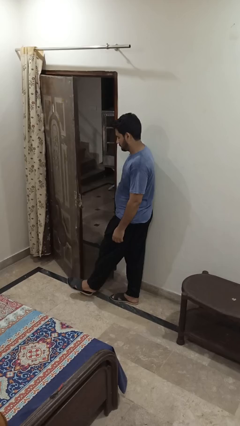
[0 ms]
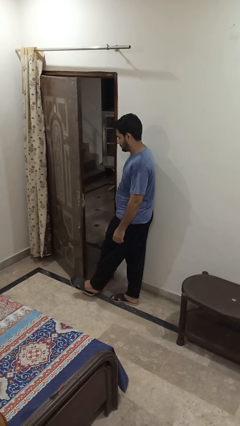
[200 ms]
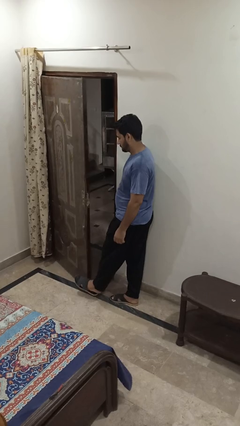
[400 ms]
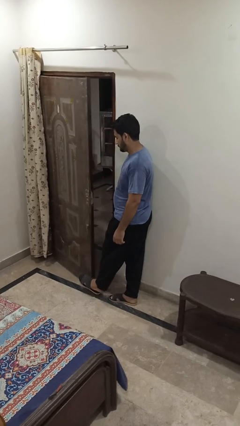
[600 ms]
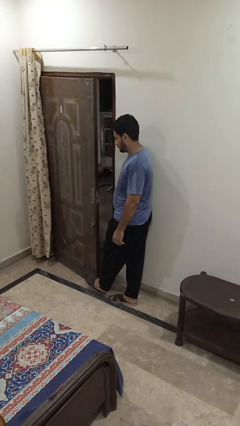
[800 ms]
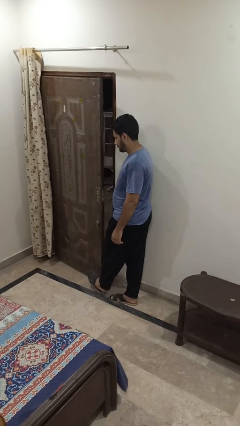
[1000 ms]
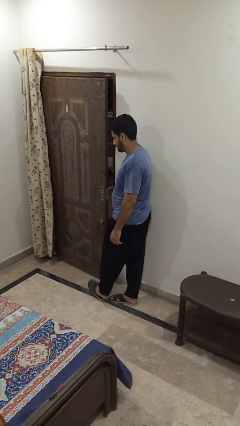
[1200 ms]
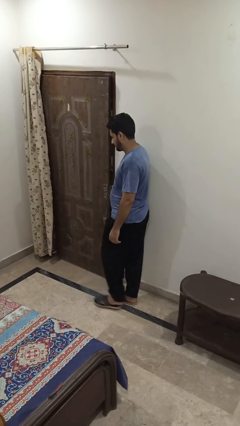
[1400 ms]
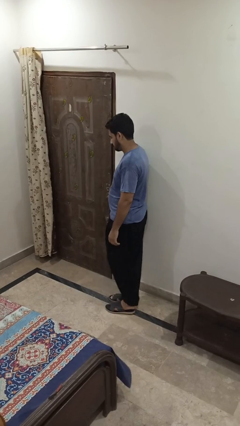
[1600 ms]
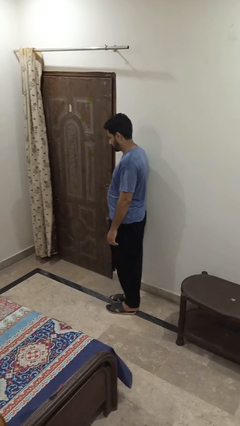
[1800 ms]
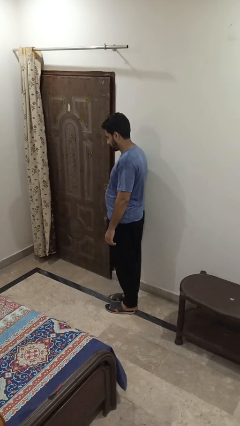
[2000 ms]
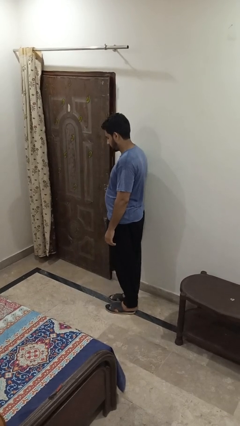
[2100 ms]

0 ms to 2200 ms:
person closes door with foot

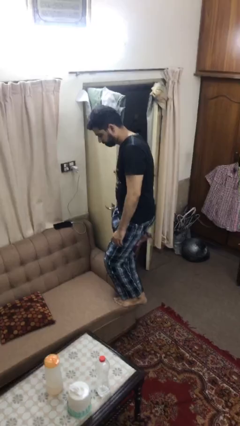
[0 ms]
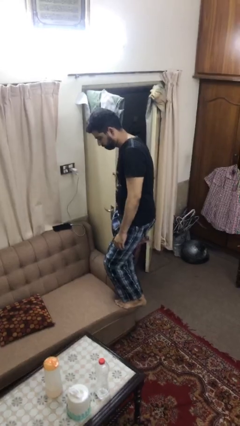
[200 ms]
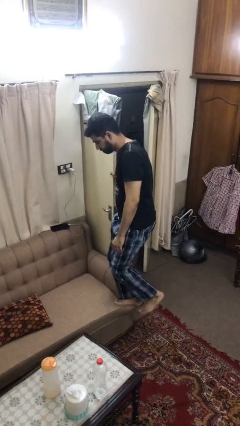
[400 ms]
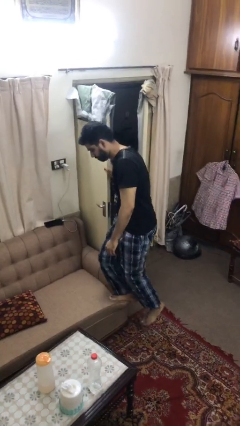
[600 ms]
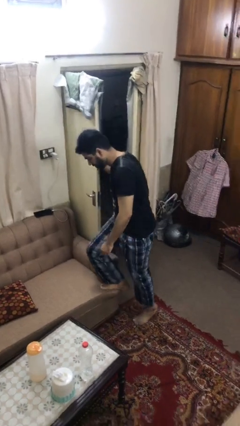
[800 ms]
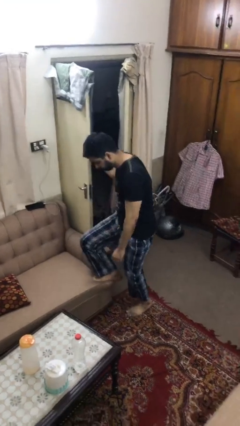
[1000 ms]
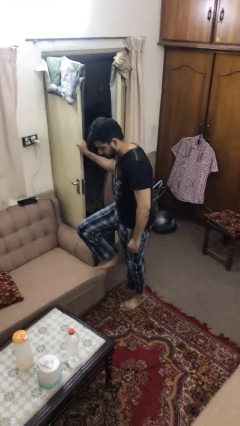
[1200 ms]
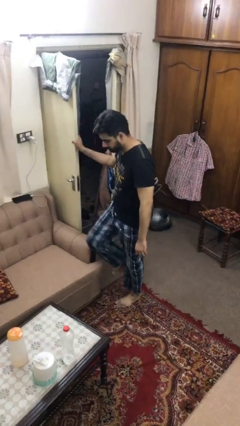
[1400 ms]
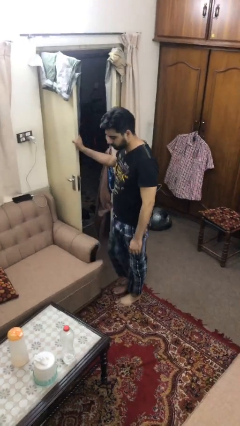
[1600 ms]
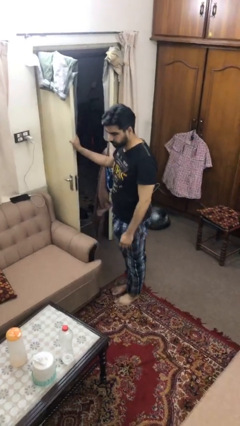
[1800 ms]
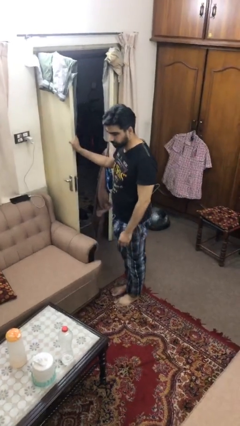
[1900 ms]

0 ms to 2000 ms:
person climbs off couch

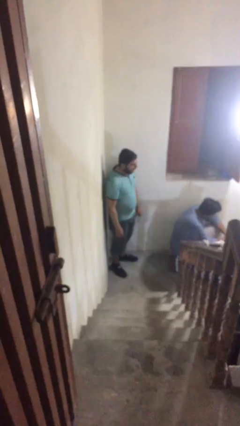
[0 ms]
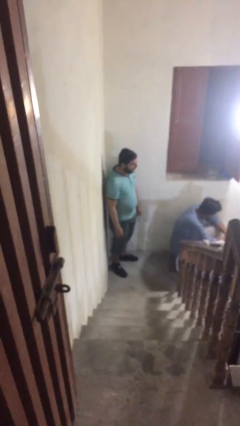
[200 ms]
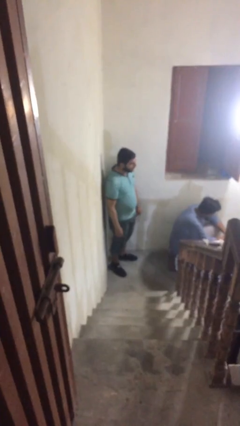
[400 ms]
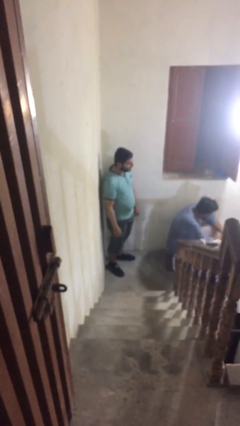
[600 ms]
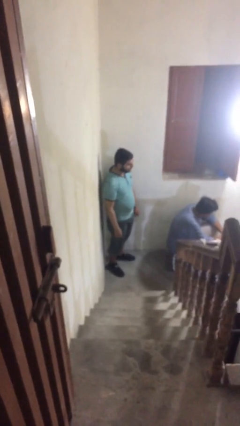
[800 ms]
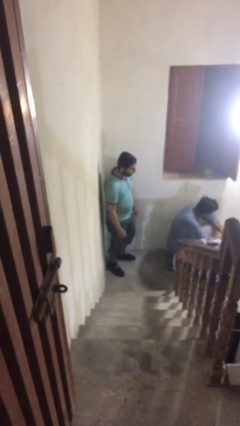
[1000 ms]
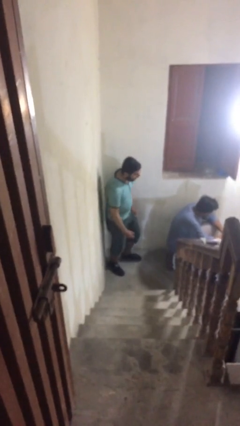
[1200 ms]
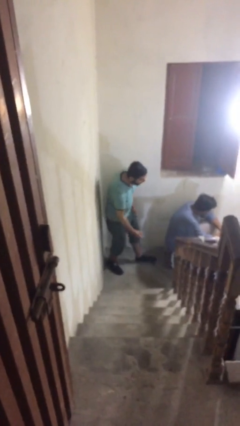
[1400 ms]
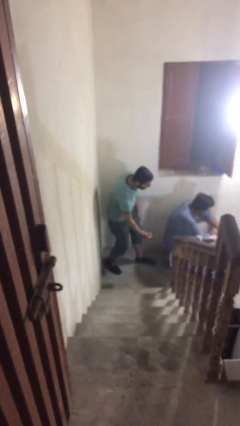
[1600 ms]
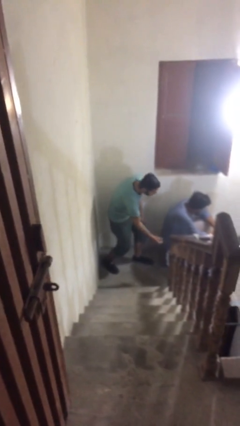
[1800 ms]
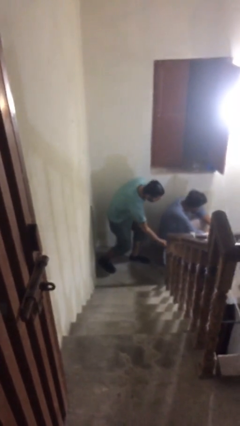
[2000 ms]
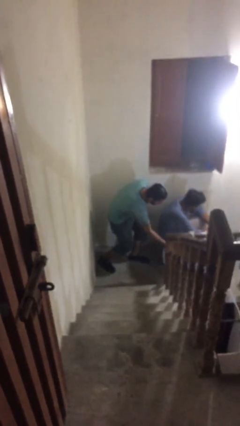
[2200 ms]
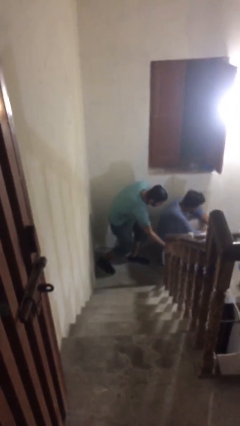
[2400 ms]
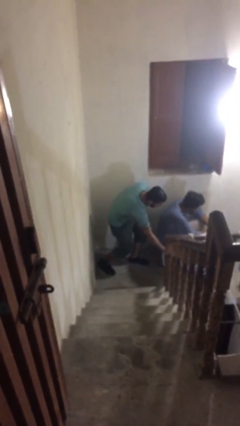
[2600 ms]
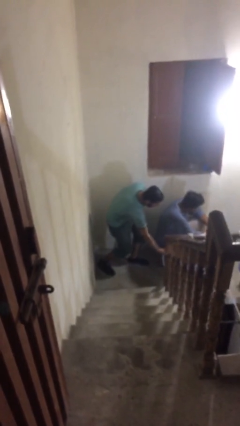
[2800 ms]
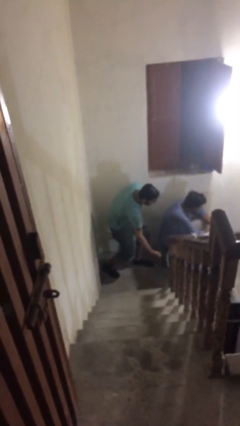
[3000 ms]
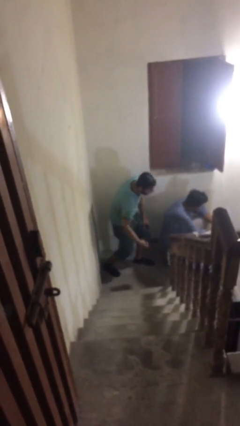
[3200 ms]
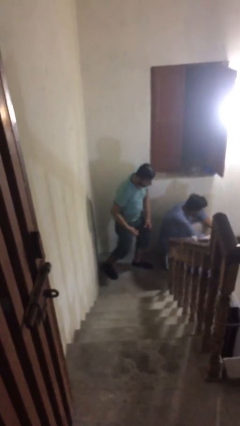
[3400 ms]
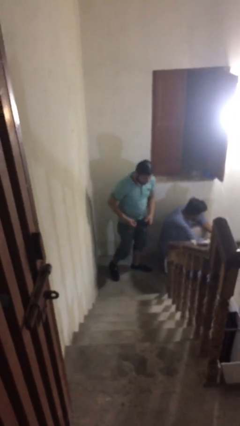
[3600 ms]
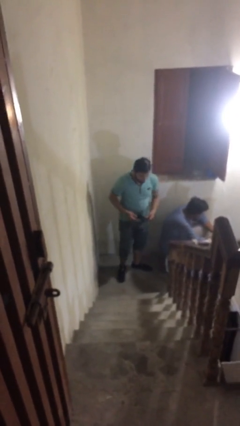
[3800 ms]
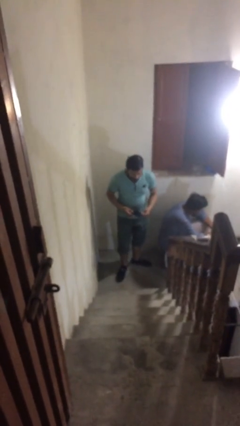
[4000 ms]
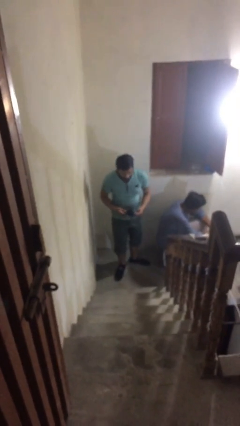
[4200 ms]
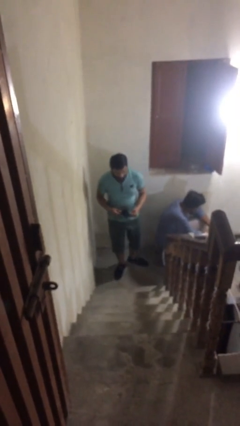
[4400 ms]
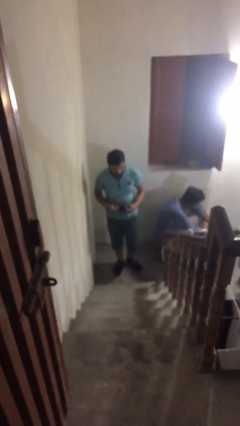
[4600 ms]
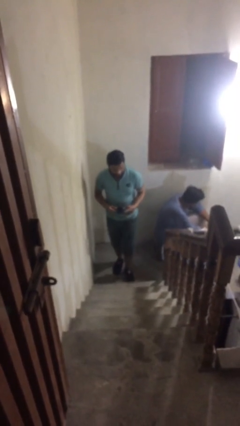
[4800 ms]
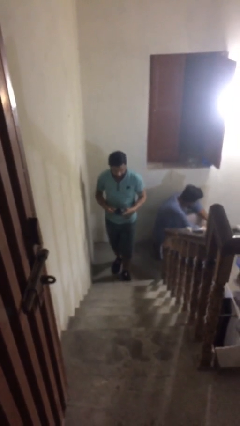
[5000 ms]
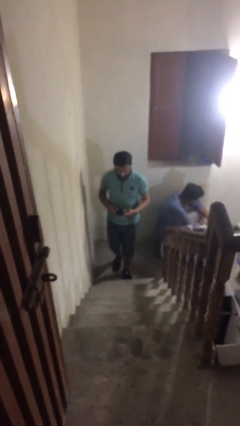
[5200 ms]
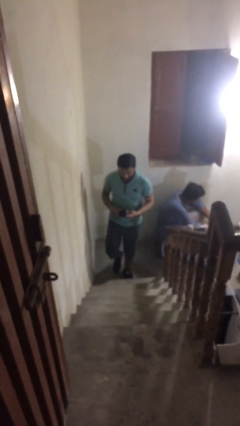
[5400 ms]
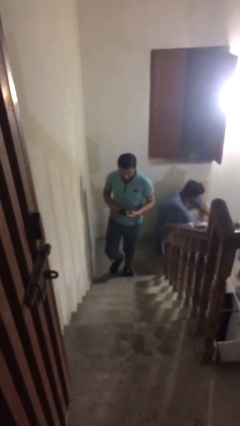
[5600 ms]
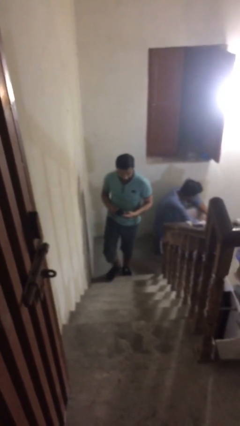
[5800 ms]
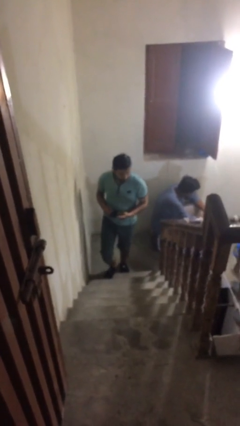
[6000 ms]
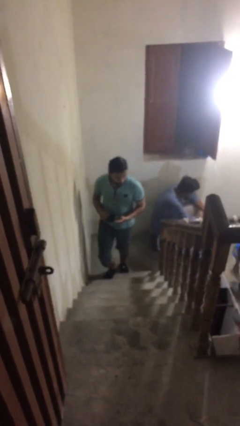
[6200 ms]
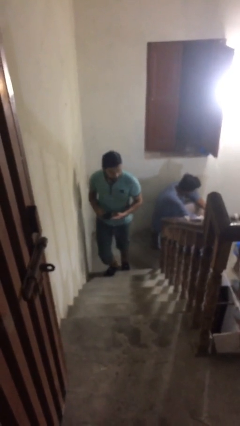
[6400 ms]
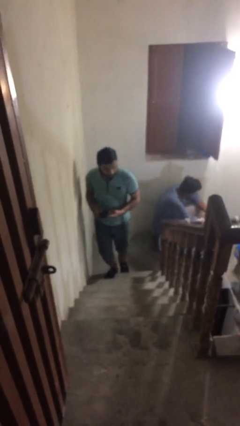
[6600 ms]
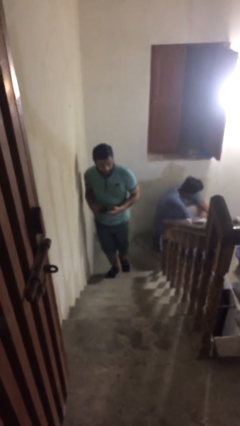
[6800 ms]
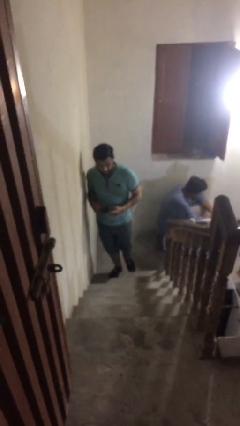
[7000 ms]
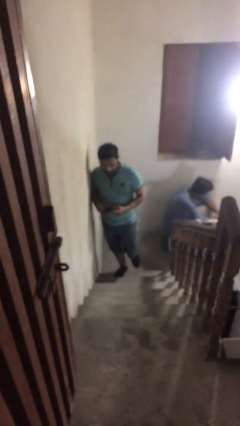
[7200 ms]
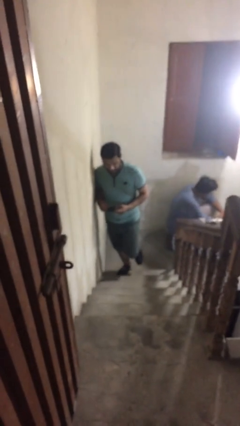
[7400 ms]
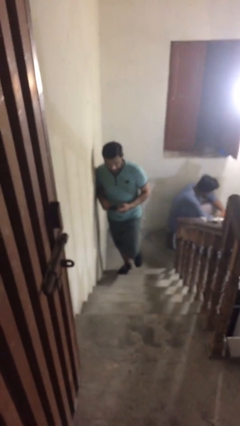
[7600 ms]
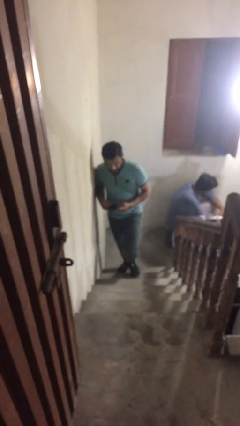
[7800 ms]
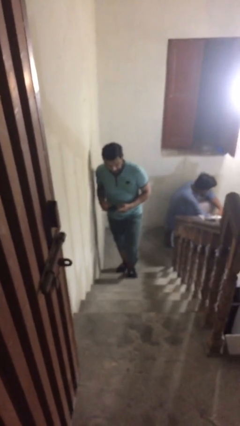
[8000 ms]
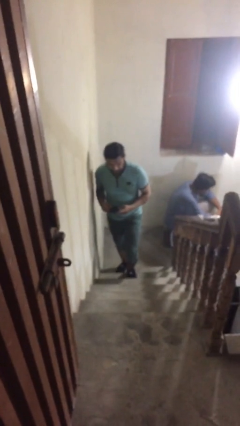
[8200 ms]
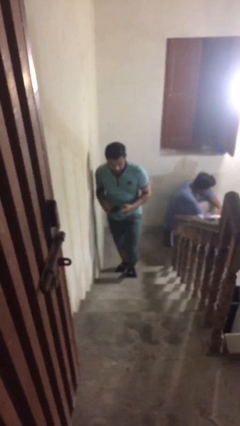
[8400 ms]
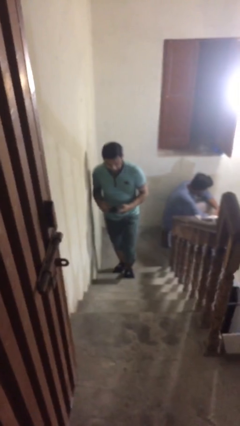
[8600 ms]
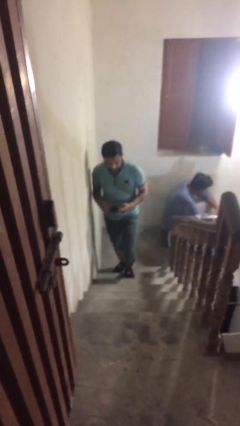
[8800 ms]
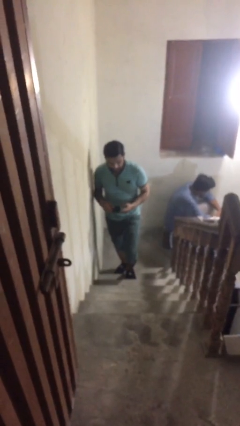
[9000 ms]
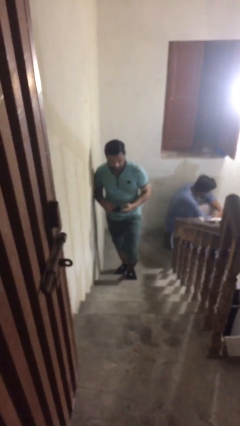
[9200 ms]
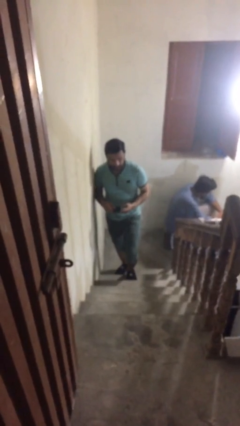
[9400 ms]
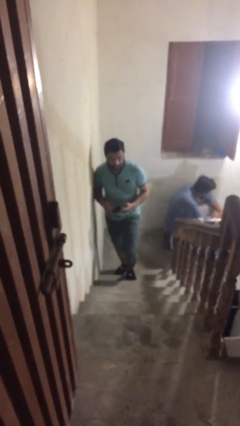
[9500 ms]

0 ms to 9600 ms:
person steals object from person

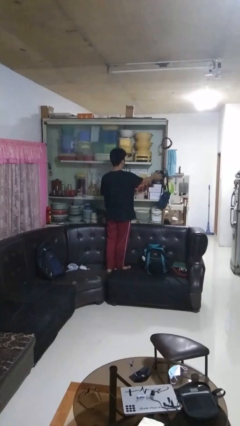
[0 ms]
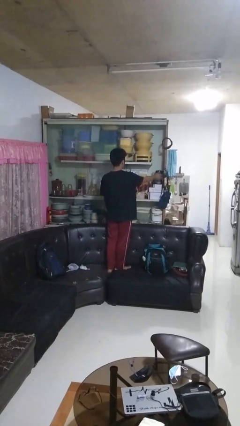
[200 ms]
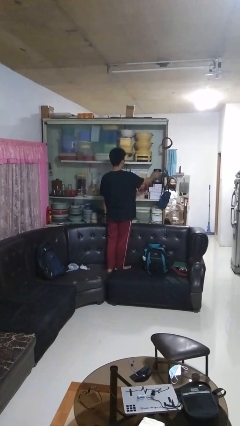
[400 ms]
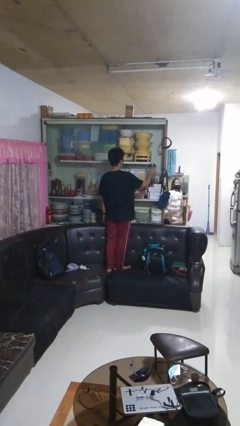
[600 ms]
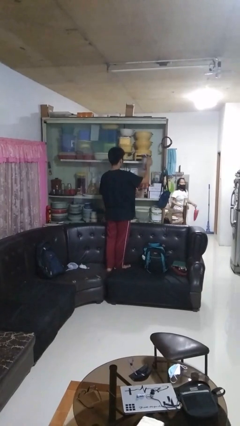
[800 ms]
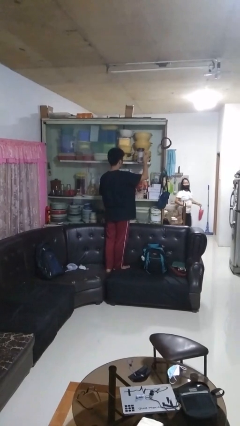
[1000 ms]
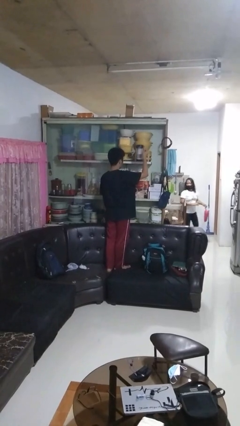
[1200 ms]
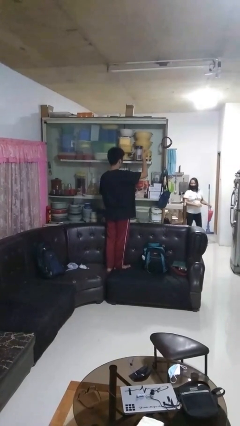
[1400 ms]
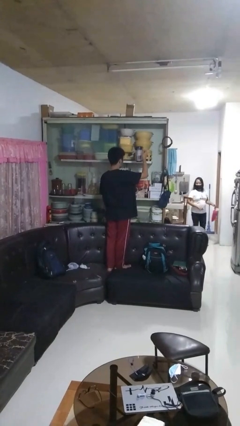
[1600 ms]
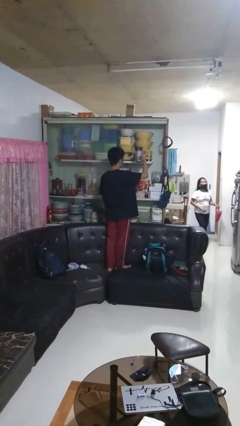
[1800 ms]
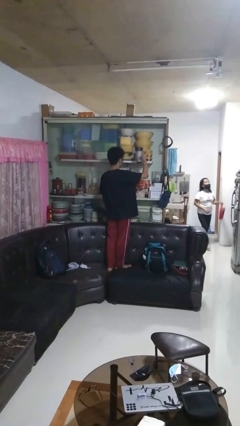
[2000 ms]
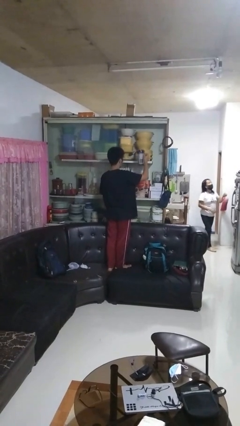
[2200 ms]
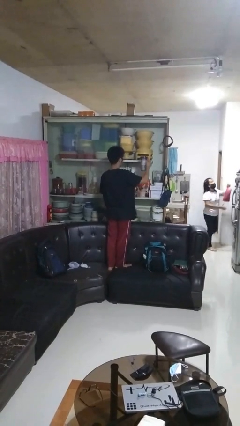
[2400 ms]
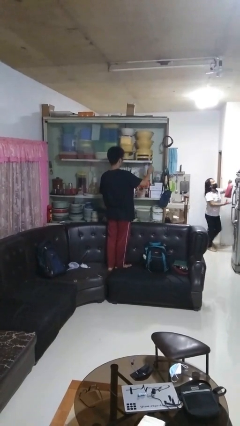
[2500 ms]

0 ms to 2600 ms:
person picks up object from cabinet

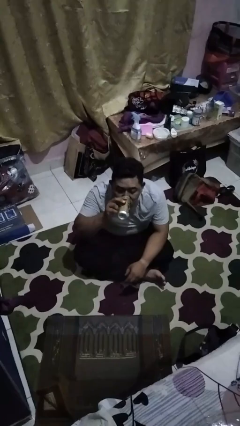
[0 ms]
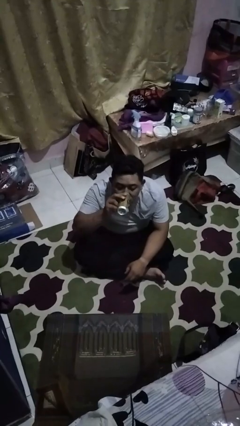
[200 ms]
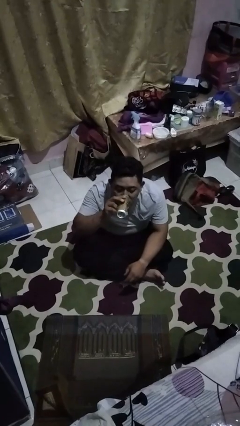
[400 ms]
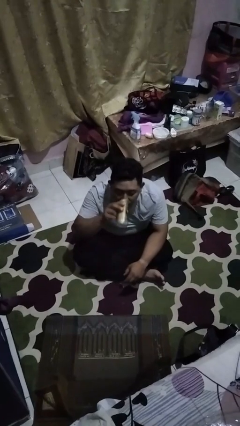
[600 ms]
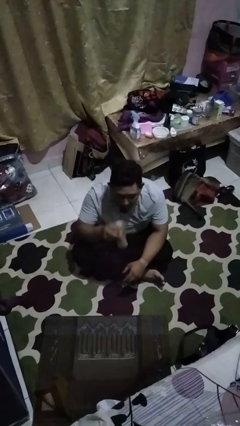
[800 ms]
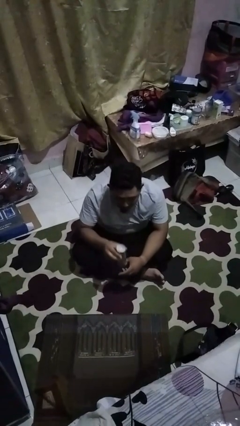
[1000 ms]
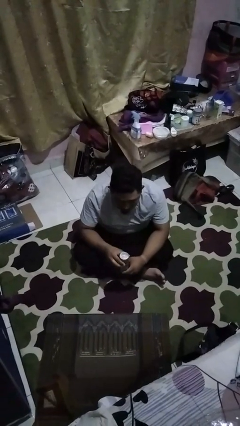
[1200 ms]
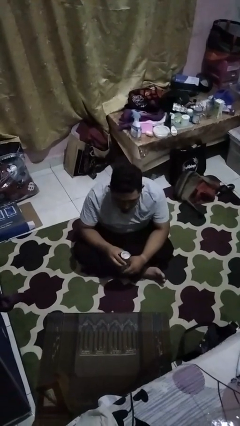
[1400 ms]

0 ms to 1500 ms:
person drinks from beverage can
